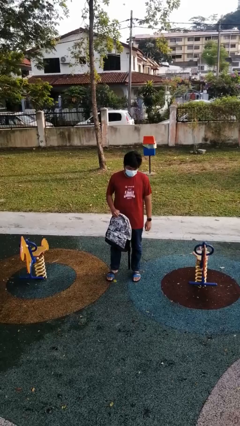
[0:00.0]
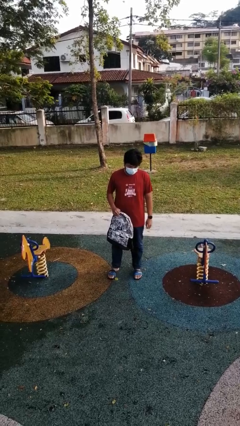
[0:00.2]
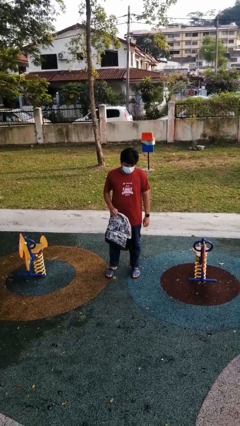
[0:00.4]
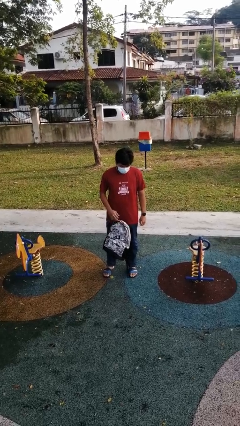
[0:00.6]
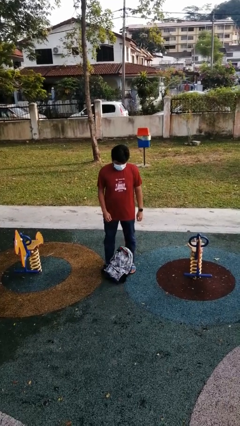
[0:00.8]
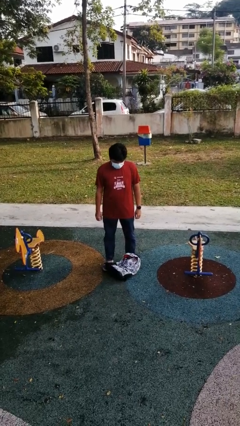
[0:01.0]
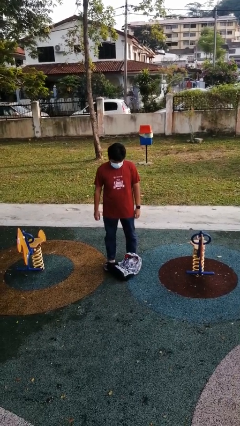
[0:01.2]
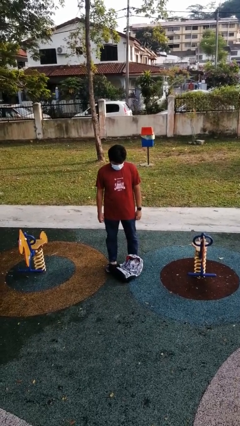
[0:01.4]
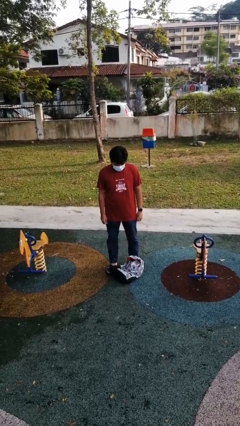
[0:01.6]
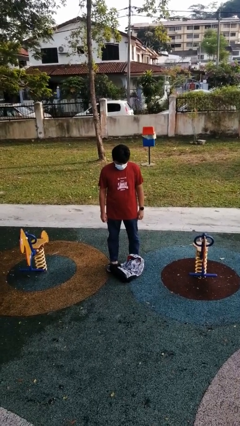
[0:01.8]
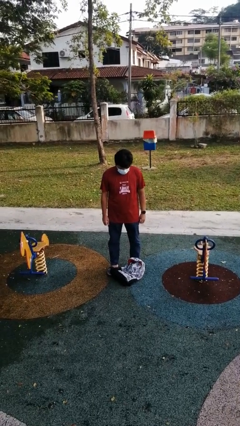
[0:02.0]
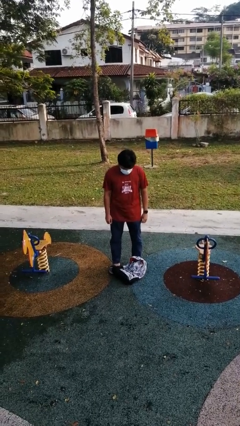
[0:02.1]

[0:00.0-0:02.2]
person drops object

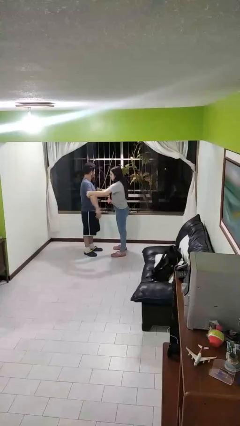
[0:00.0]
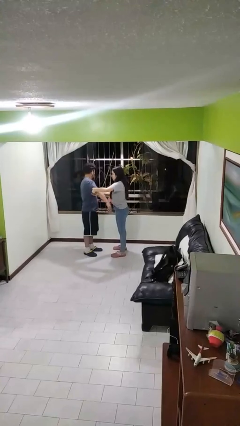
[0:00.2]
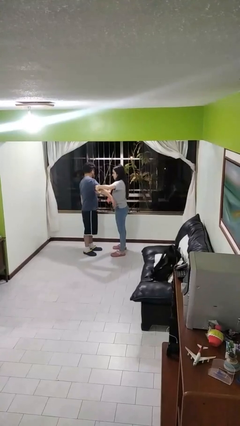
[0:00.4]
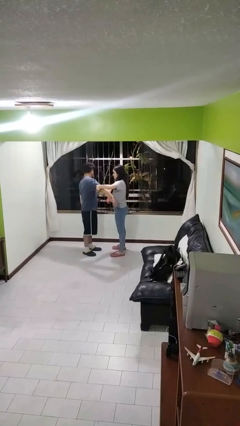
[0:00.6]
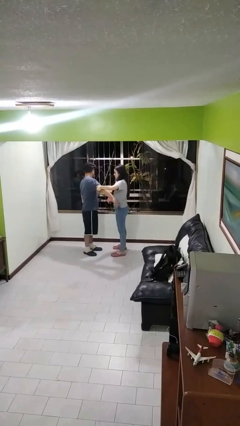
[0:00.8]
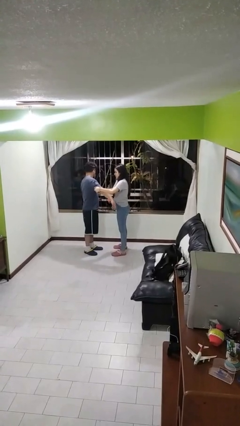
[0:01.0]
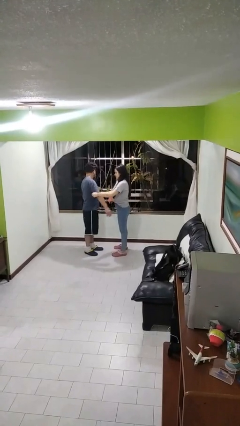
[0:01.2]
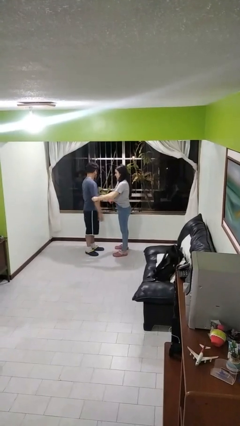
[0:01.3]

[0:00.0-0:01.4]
person grabs person by bicep

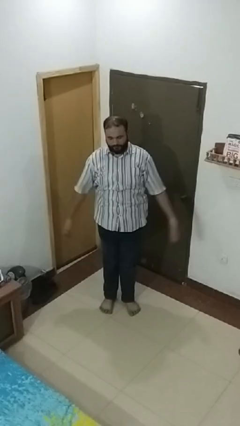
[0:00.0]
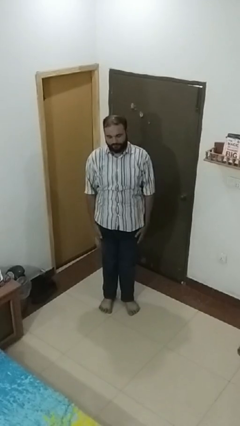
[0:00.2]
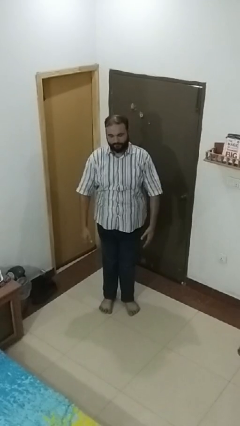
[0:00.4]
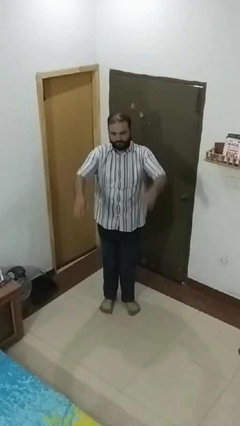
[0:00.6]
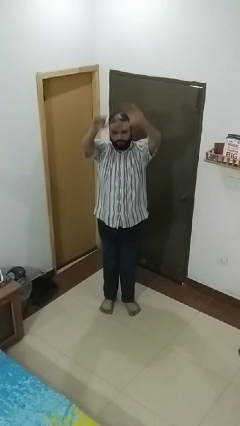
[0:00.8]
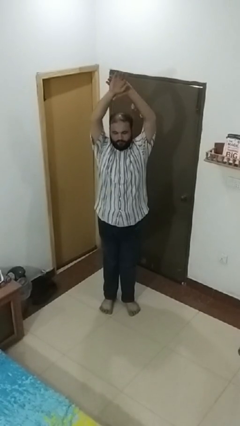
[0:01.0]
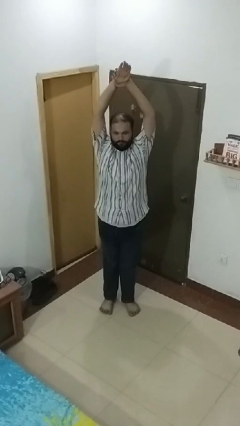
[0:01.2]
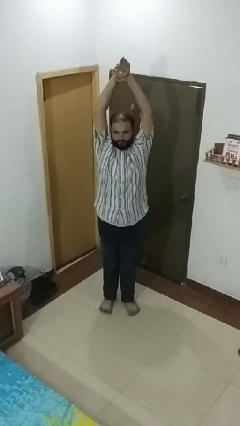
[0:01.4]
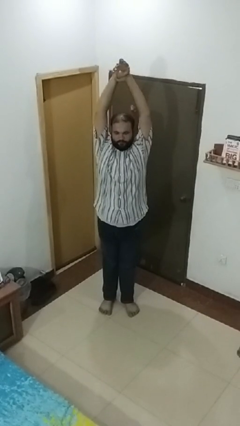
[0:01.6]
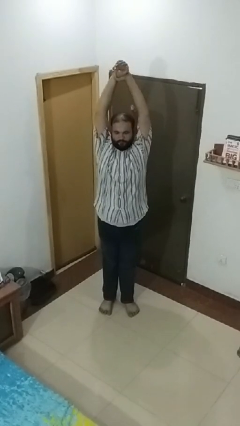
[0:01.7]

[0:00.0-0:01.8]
person stretches arms over head

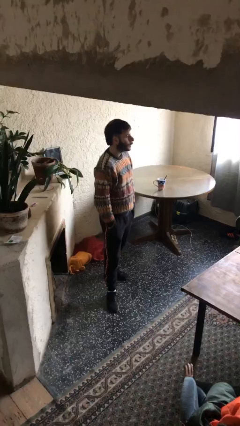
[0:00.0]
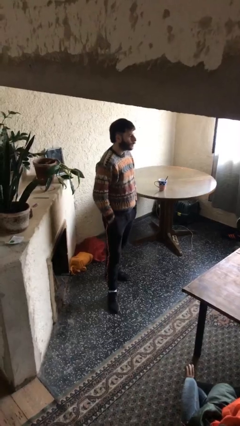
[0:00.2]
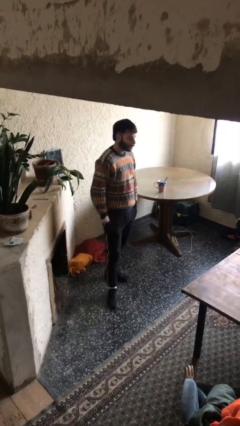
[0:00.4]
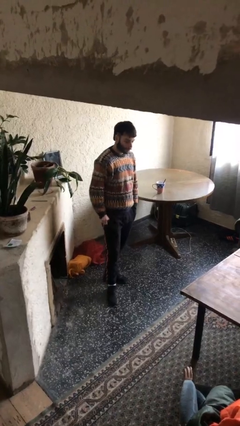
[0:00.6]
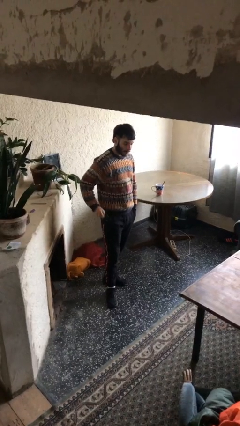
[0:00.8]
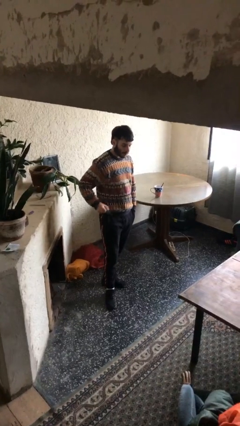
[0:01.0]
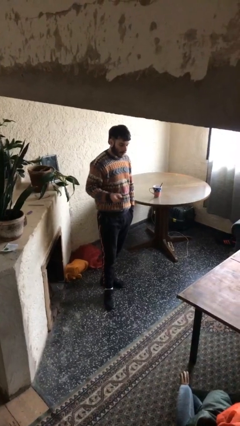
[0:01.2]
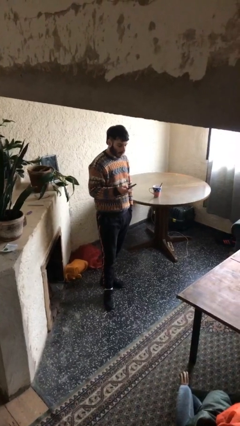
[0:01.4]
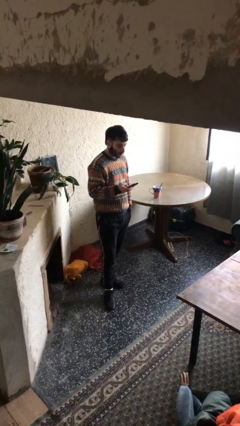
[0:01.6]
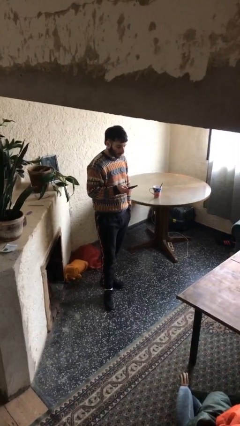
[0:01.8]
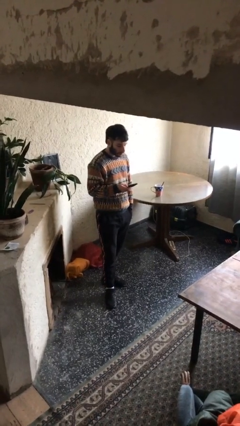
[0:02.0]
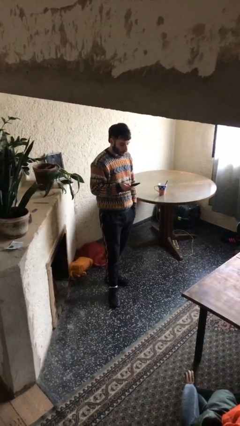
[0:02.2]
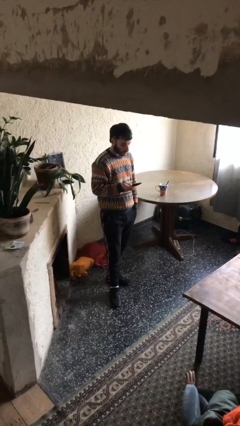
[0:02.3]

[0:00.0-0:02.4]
person takes phone from pocket

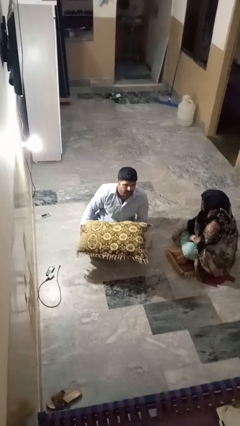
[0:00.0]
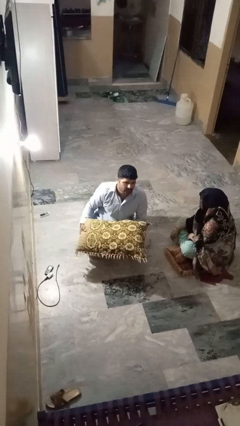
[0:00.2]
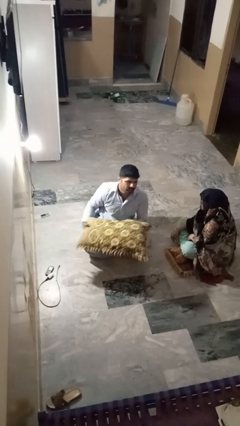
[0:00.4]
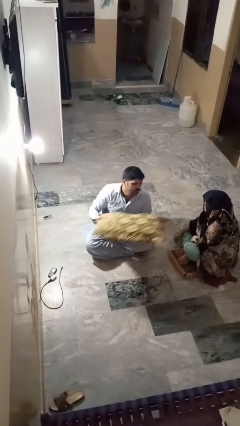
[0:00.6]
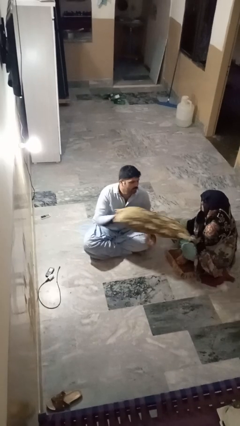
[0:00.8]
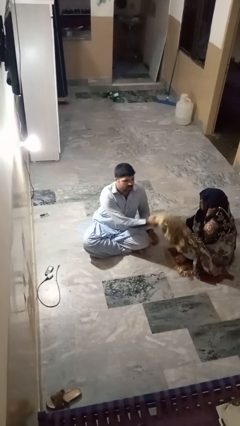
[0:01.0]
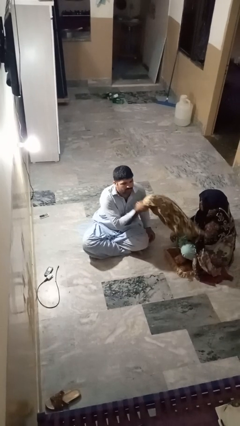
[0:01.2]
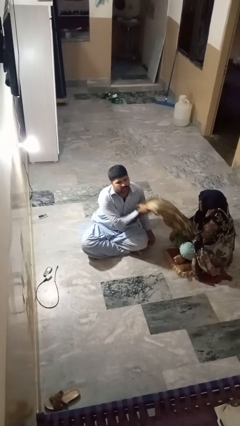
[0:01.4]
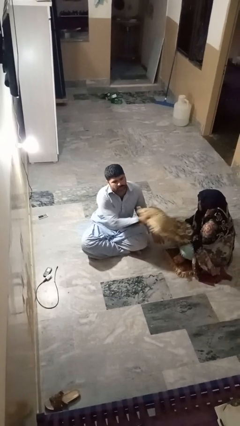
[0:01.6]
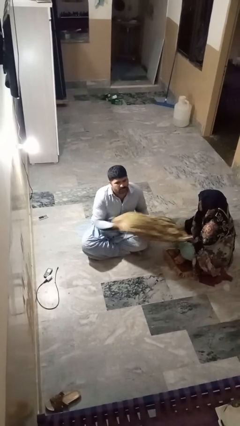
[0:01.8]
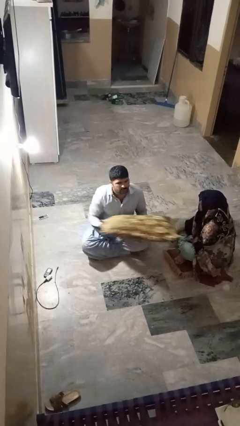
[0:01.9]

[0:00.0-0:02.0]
person hits person with pillow

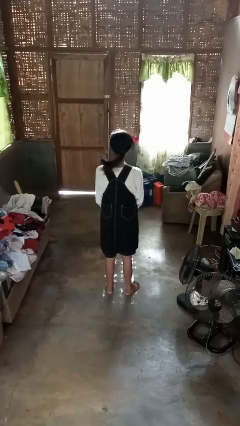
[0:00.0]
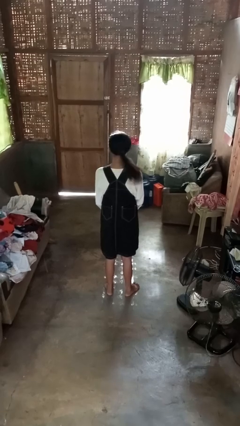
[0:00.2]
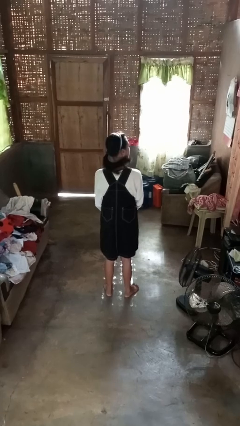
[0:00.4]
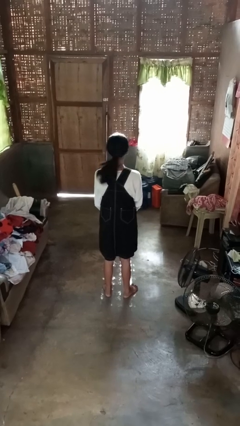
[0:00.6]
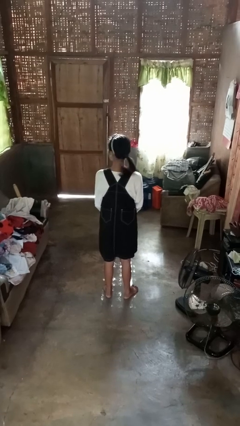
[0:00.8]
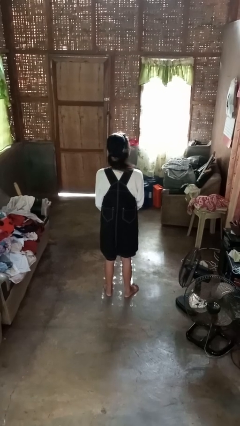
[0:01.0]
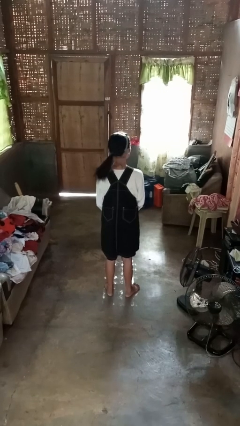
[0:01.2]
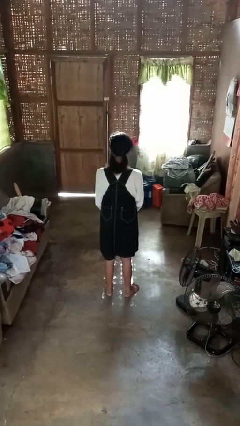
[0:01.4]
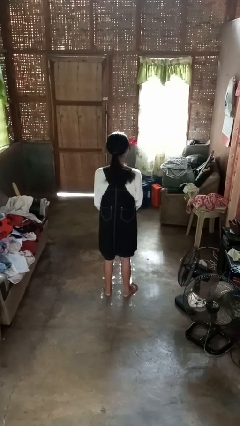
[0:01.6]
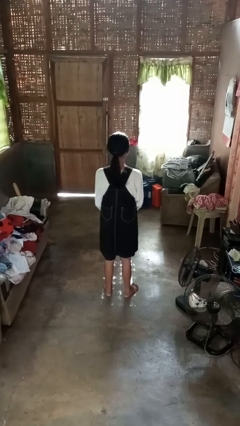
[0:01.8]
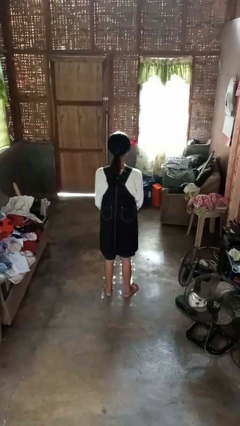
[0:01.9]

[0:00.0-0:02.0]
person shakes head

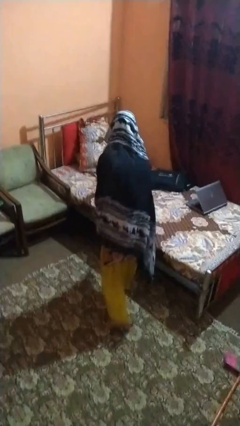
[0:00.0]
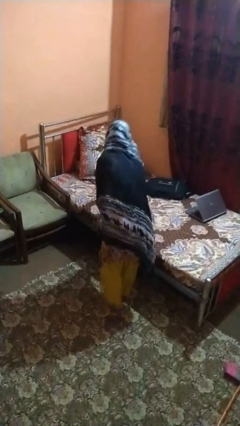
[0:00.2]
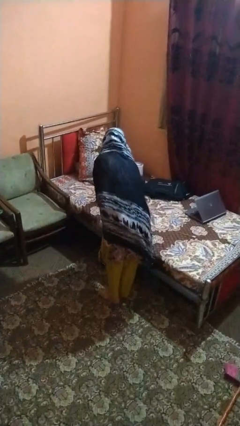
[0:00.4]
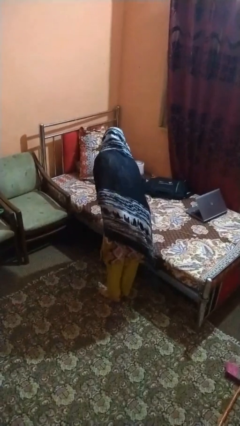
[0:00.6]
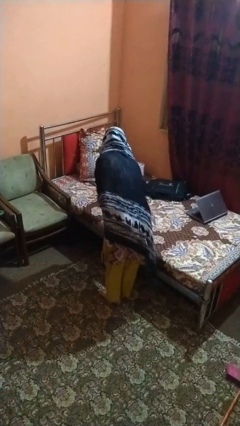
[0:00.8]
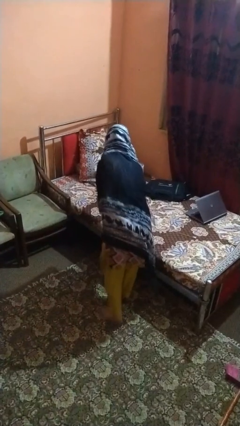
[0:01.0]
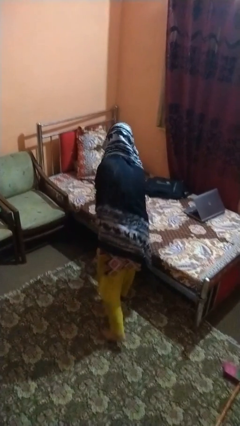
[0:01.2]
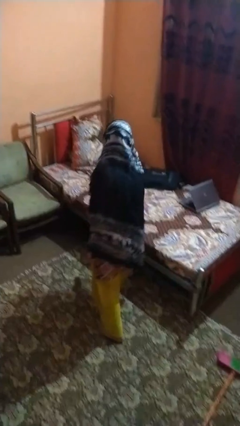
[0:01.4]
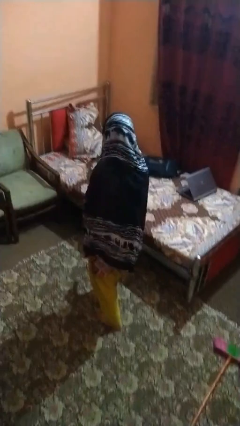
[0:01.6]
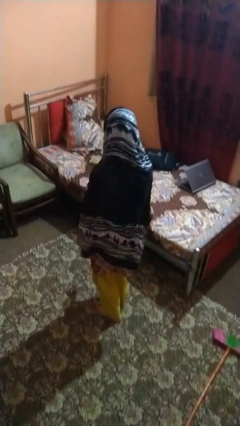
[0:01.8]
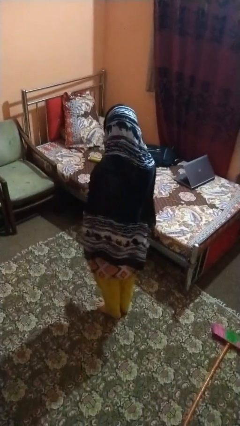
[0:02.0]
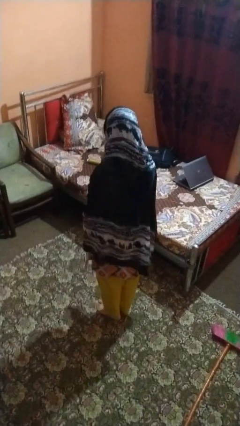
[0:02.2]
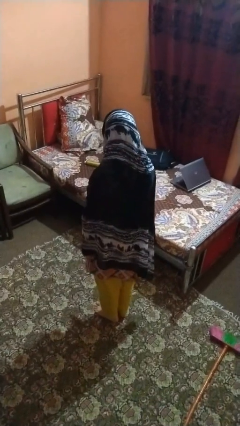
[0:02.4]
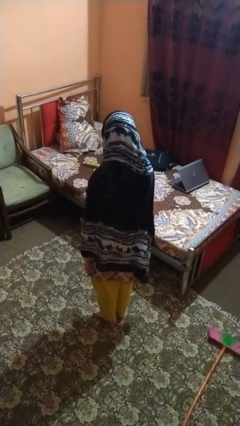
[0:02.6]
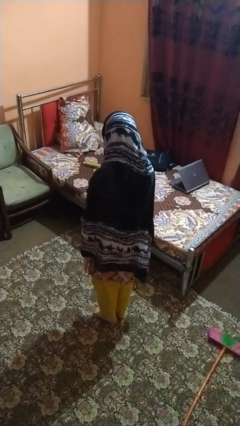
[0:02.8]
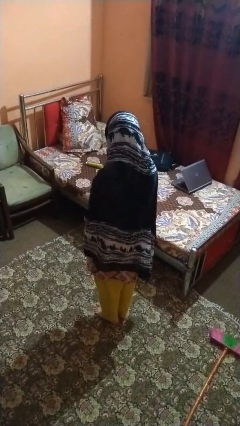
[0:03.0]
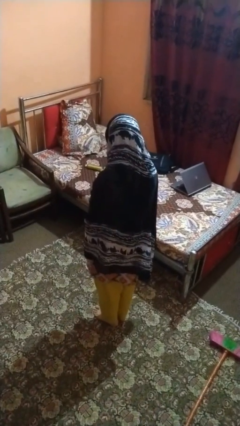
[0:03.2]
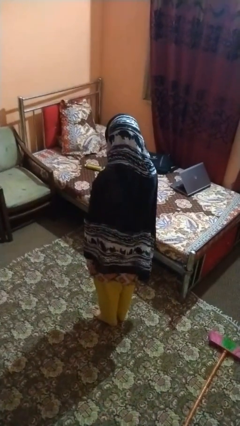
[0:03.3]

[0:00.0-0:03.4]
person picks up object from bed

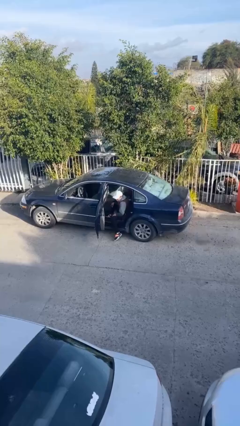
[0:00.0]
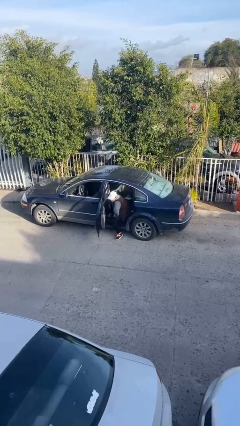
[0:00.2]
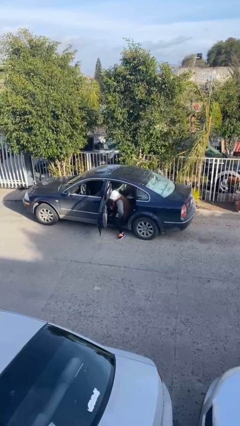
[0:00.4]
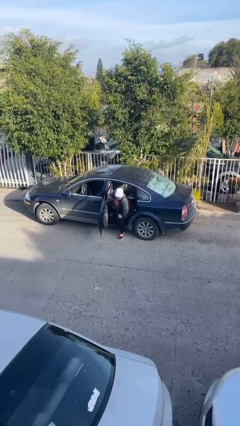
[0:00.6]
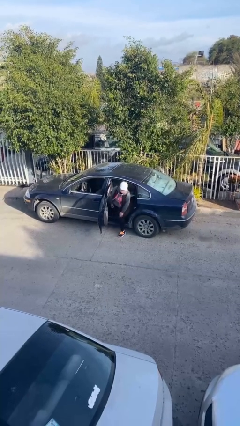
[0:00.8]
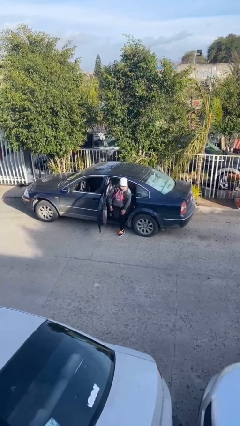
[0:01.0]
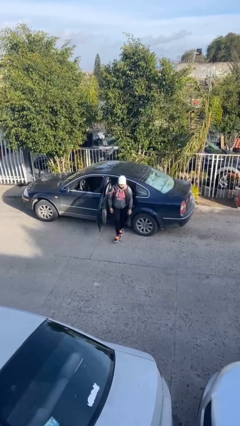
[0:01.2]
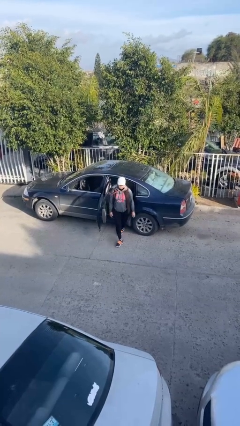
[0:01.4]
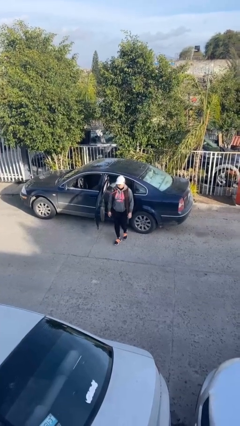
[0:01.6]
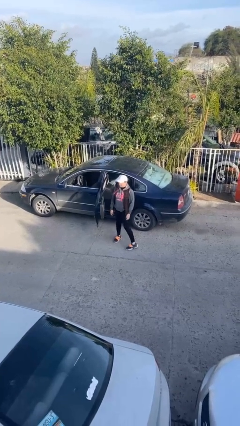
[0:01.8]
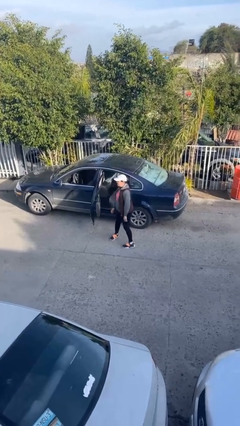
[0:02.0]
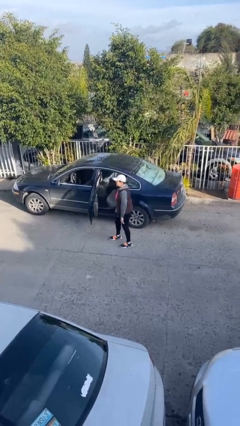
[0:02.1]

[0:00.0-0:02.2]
person exits car
